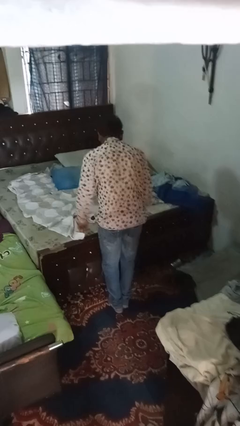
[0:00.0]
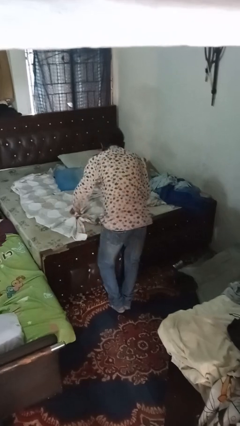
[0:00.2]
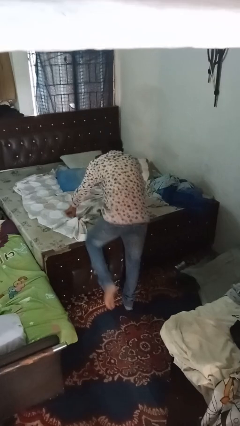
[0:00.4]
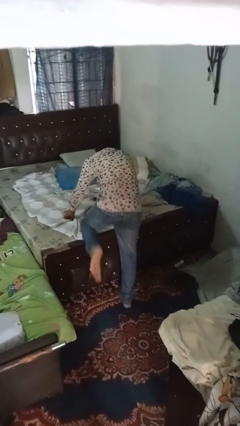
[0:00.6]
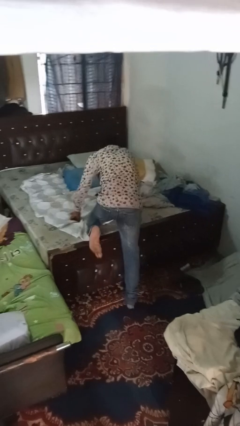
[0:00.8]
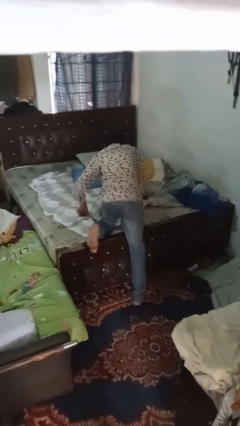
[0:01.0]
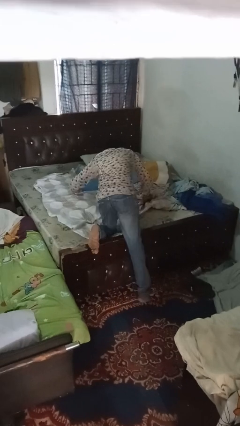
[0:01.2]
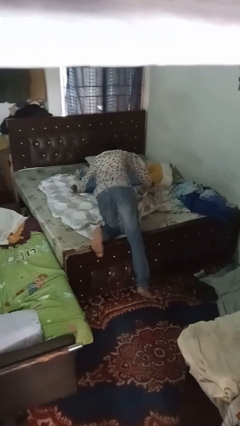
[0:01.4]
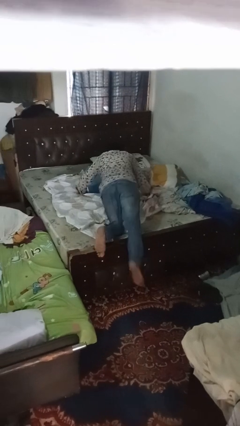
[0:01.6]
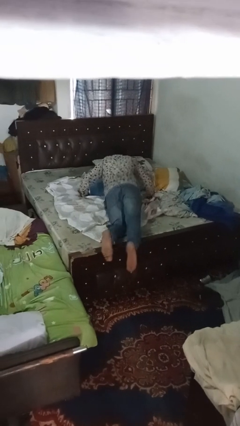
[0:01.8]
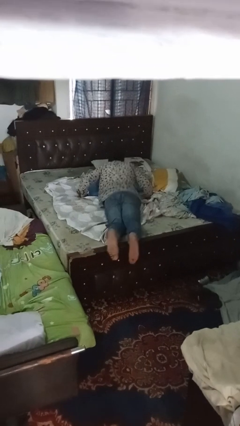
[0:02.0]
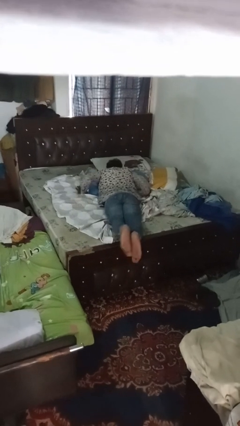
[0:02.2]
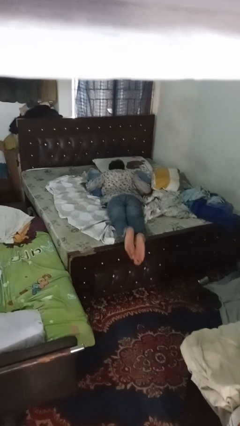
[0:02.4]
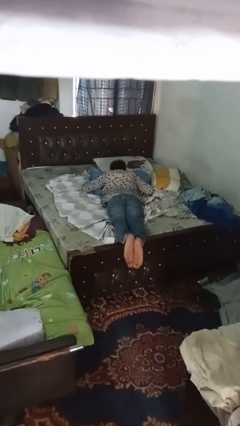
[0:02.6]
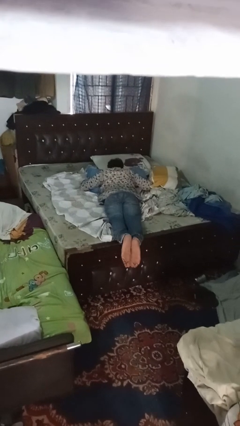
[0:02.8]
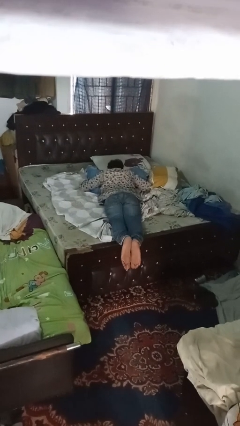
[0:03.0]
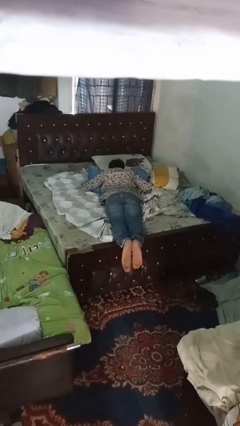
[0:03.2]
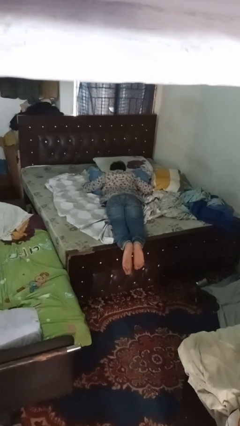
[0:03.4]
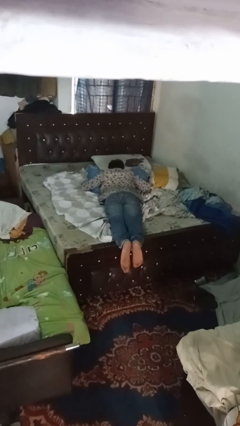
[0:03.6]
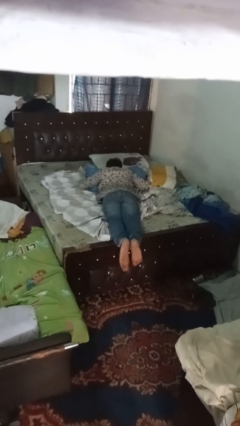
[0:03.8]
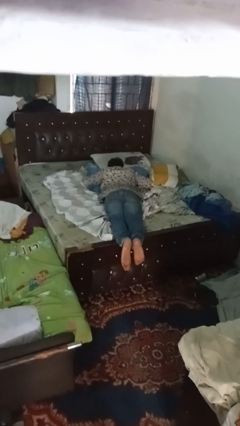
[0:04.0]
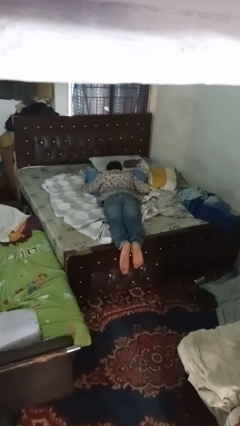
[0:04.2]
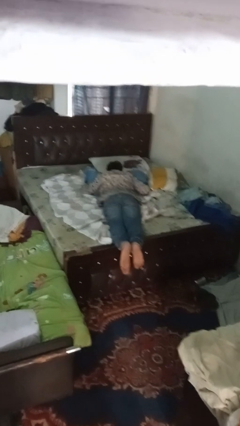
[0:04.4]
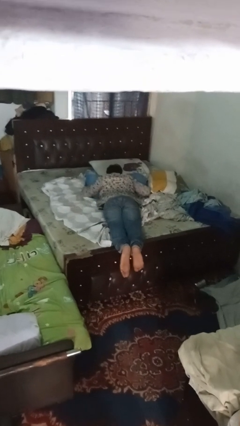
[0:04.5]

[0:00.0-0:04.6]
person lies down on bed

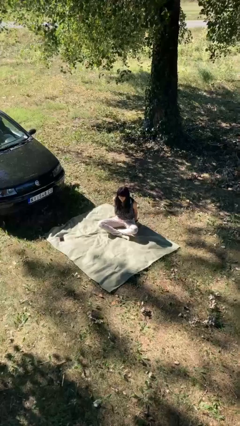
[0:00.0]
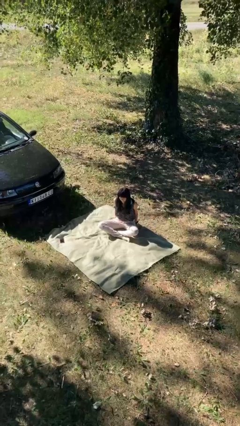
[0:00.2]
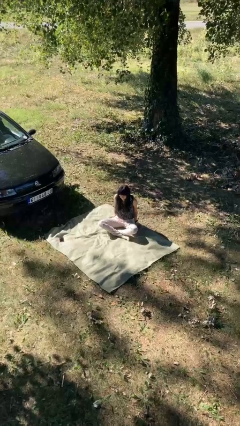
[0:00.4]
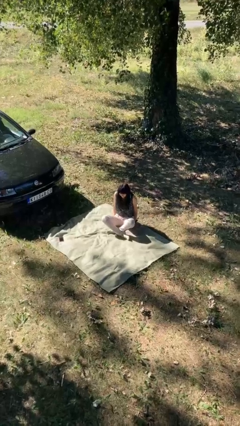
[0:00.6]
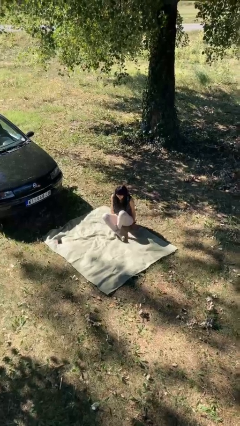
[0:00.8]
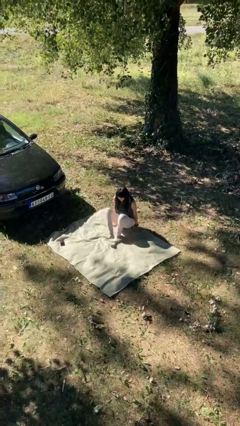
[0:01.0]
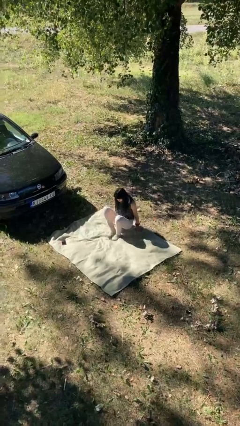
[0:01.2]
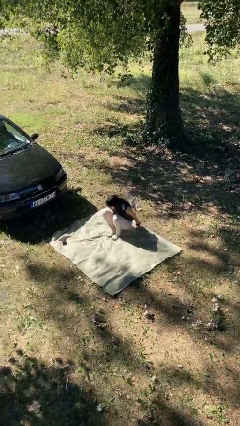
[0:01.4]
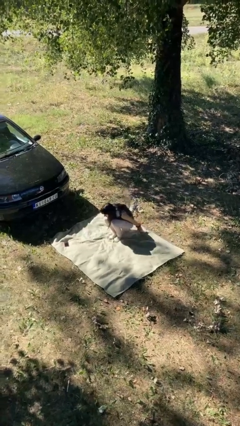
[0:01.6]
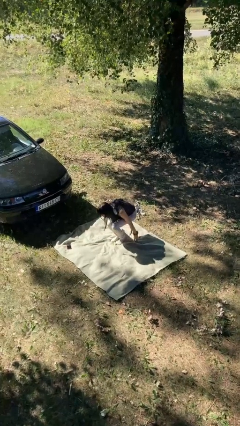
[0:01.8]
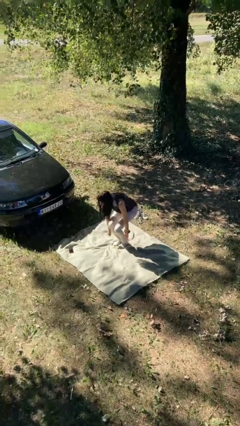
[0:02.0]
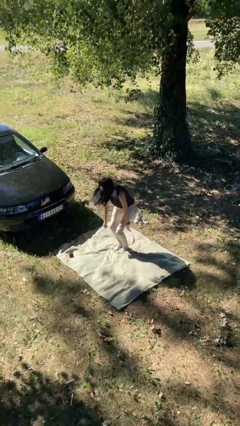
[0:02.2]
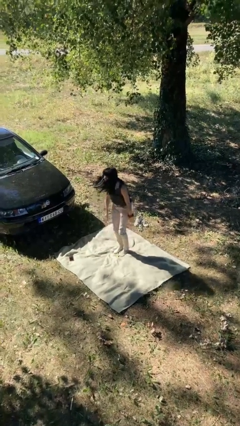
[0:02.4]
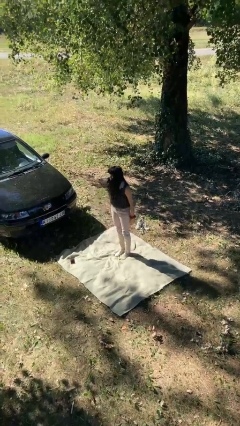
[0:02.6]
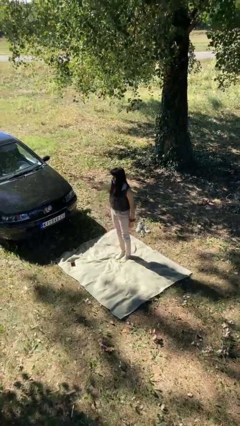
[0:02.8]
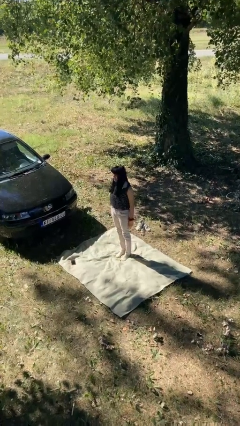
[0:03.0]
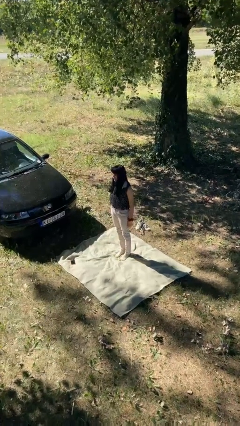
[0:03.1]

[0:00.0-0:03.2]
person stands up from floor

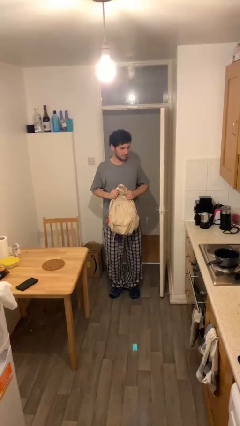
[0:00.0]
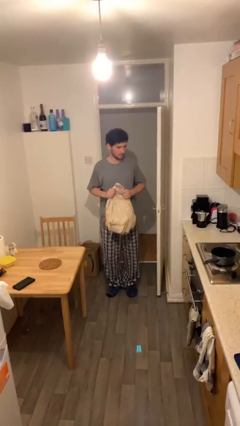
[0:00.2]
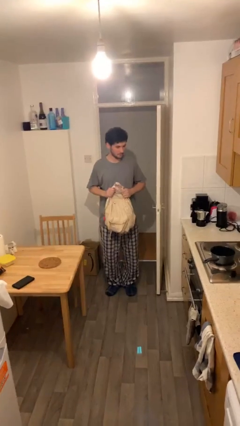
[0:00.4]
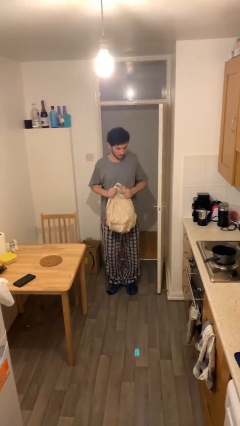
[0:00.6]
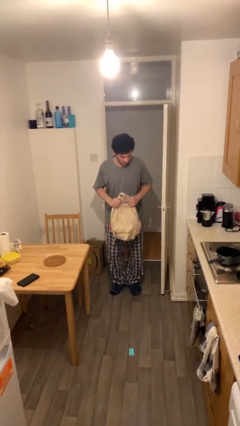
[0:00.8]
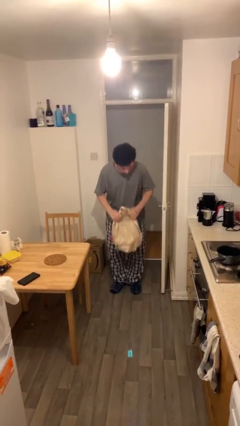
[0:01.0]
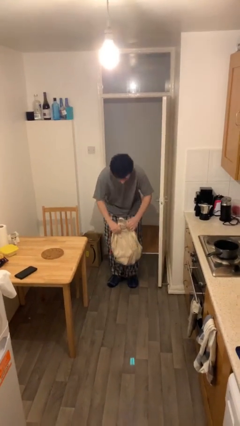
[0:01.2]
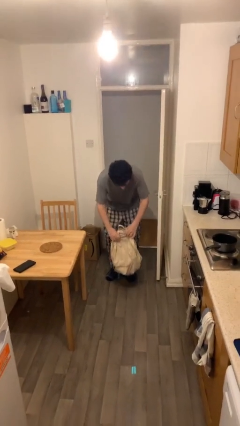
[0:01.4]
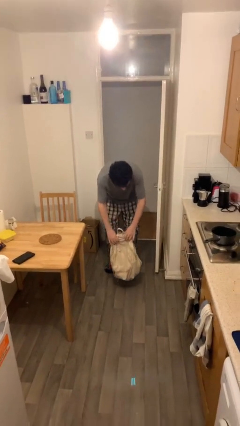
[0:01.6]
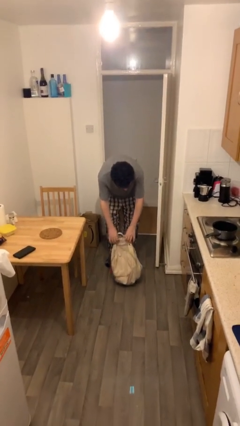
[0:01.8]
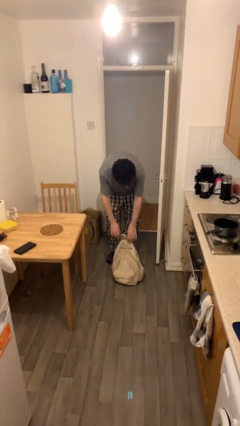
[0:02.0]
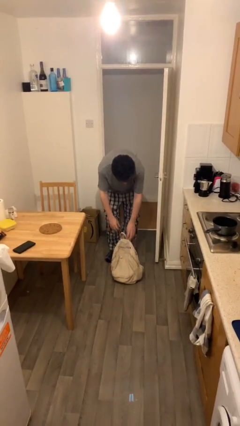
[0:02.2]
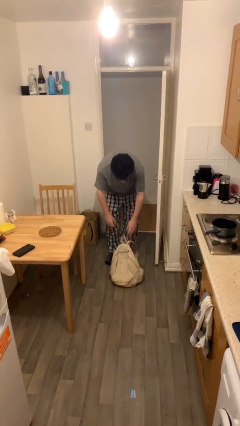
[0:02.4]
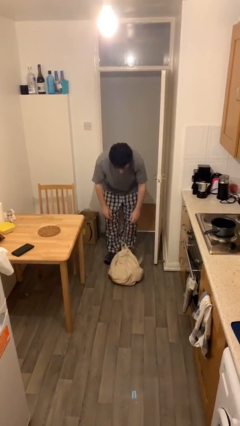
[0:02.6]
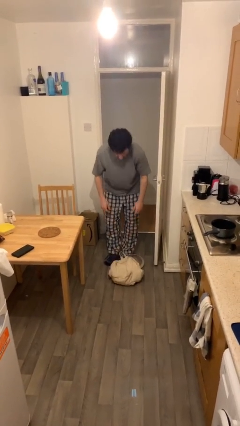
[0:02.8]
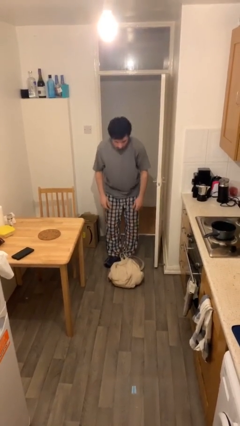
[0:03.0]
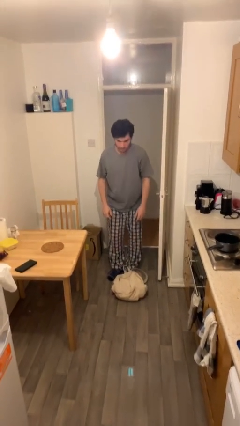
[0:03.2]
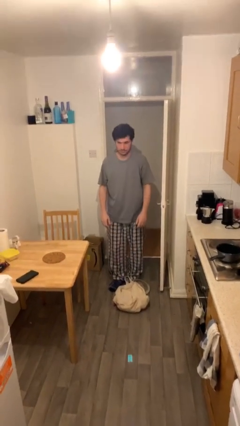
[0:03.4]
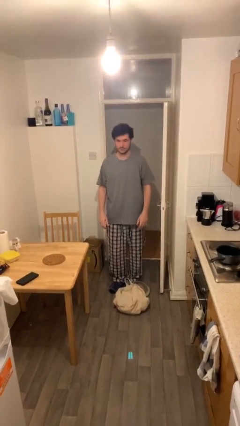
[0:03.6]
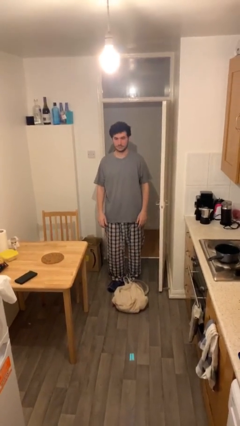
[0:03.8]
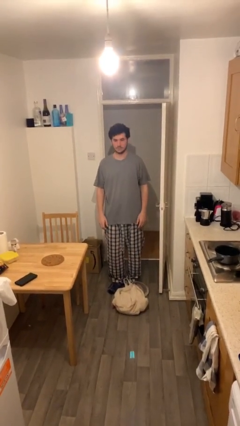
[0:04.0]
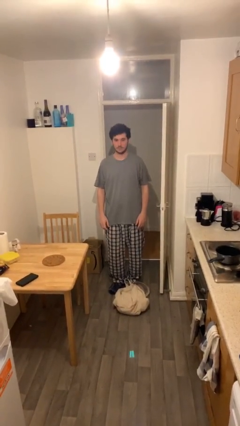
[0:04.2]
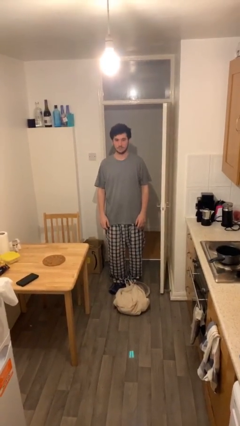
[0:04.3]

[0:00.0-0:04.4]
person puts down object on floor

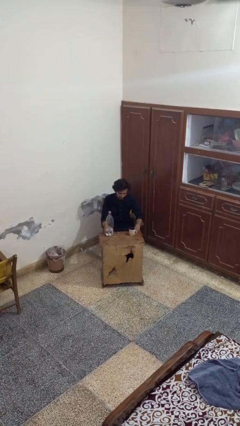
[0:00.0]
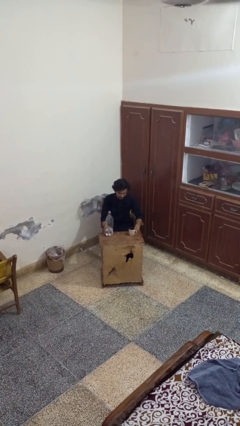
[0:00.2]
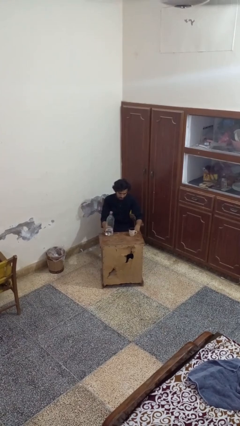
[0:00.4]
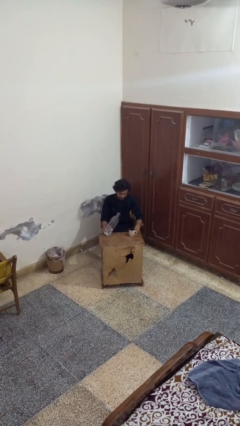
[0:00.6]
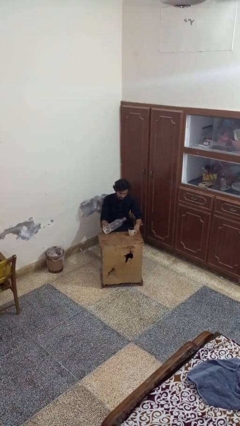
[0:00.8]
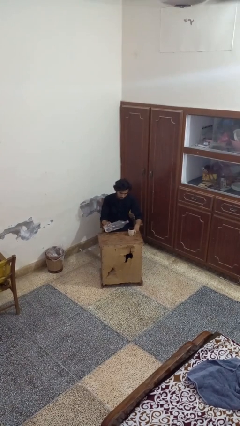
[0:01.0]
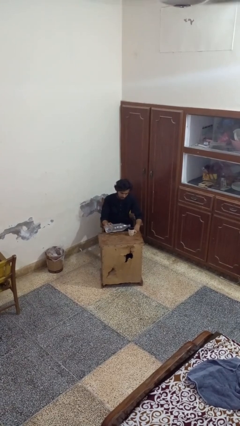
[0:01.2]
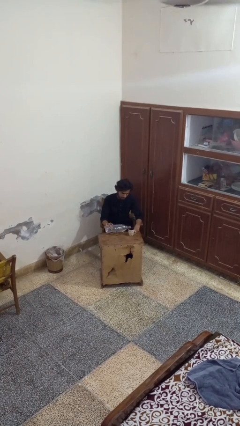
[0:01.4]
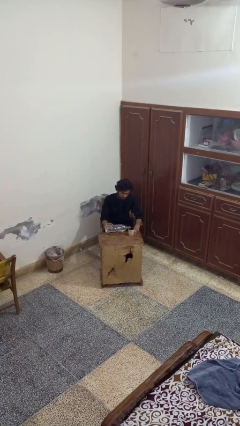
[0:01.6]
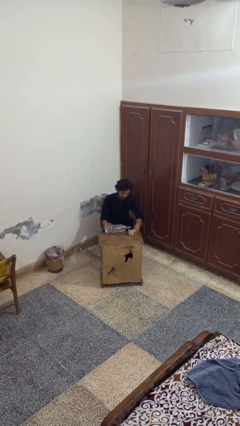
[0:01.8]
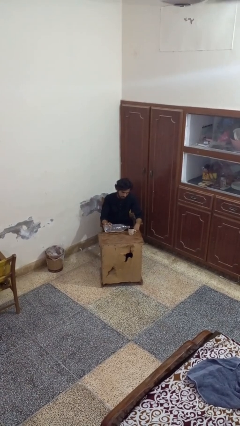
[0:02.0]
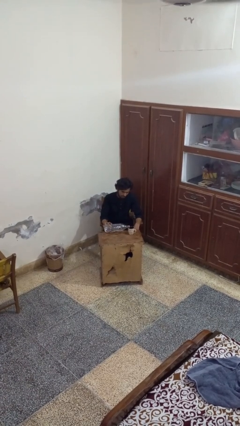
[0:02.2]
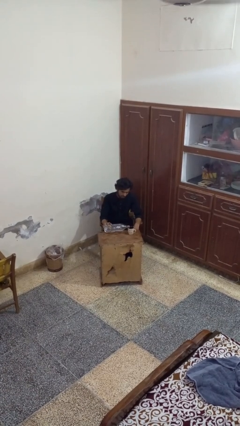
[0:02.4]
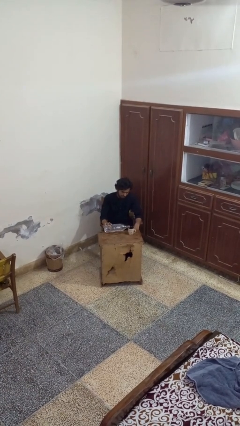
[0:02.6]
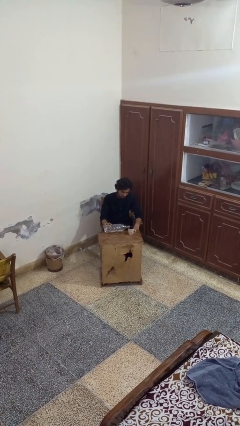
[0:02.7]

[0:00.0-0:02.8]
person pours liquid into cup

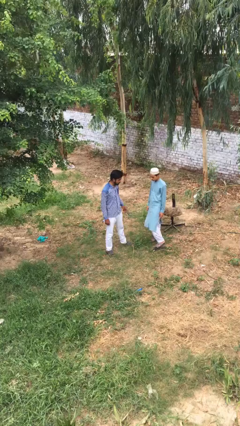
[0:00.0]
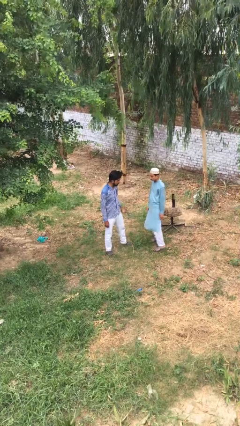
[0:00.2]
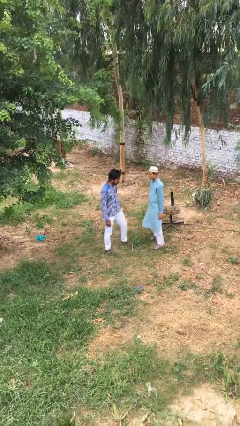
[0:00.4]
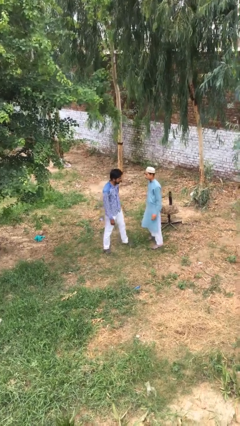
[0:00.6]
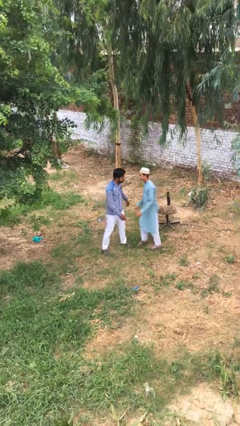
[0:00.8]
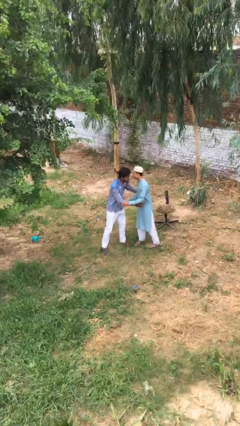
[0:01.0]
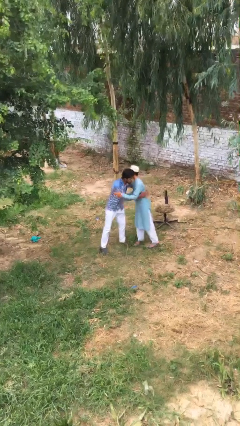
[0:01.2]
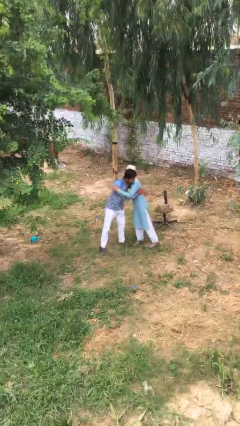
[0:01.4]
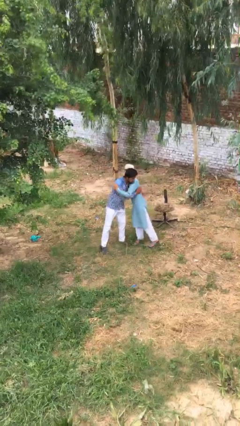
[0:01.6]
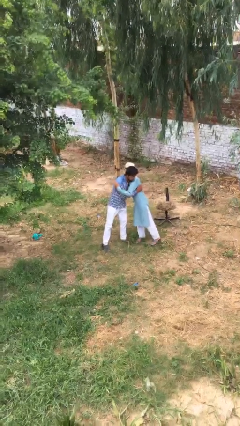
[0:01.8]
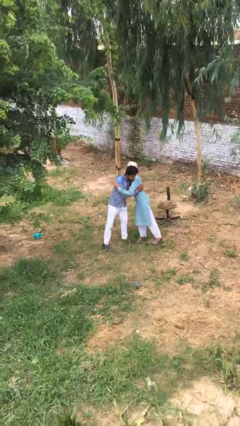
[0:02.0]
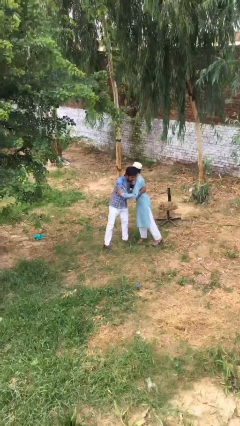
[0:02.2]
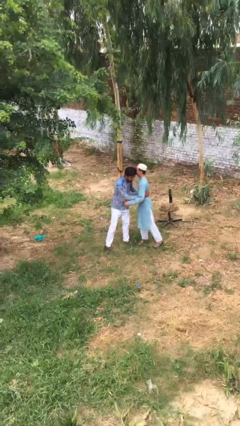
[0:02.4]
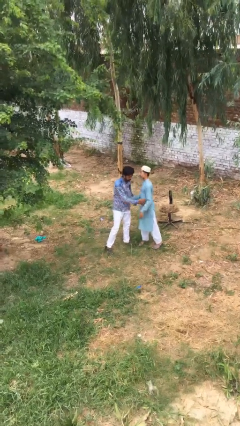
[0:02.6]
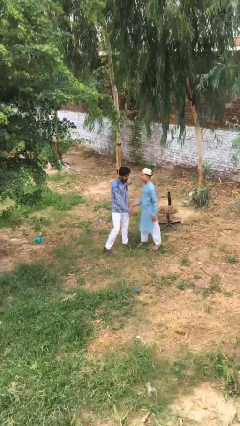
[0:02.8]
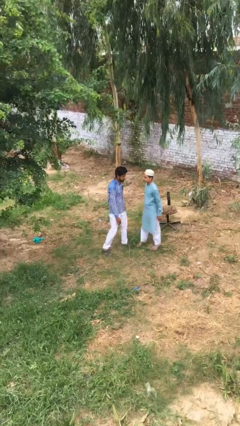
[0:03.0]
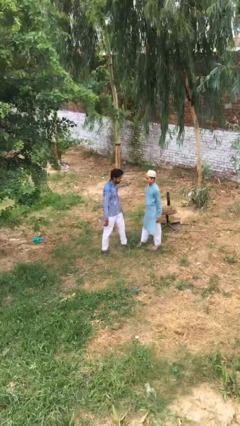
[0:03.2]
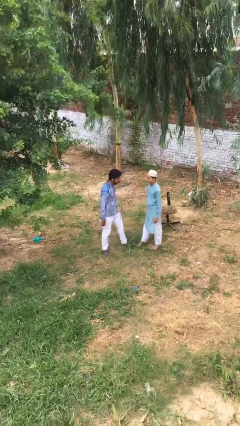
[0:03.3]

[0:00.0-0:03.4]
person embraces person
